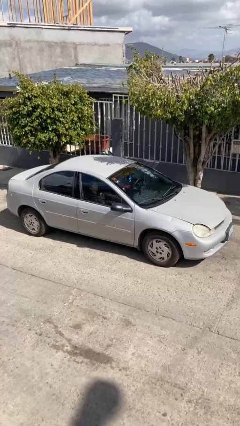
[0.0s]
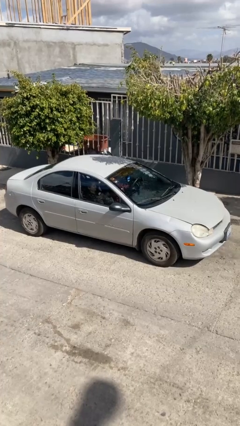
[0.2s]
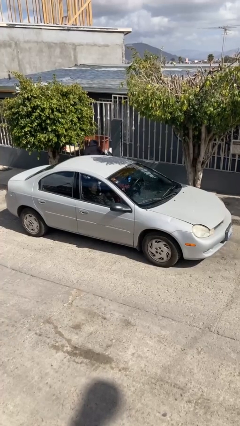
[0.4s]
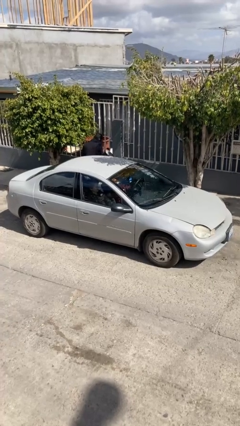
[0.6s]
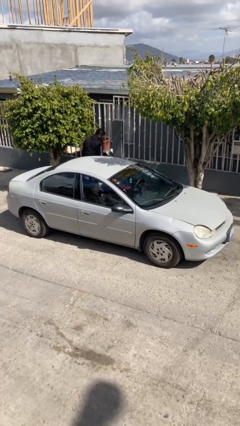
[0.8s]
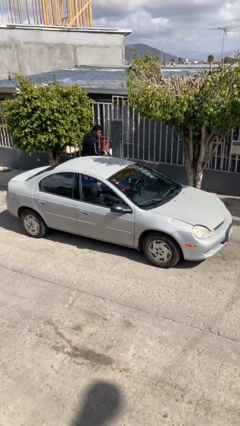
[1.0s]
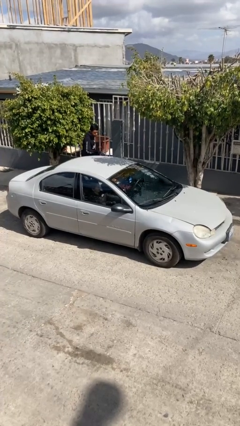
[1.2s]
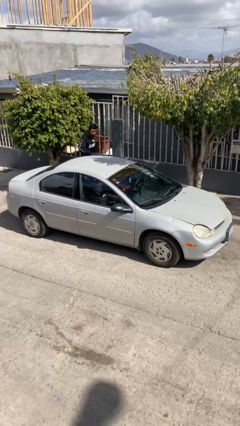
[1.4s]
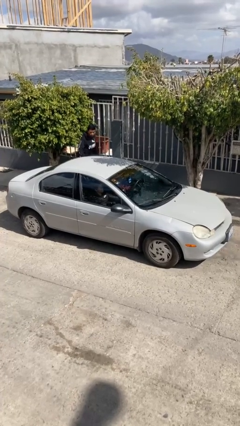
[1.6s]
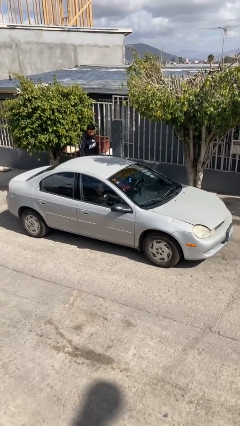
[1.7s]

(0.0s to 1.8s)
car drops off person

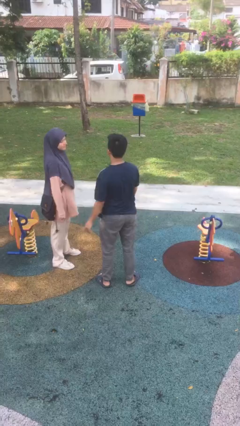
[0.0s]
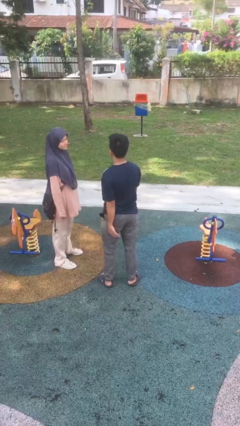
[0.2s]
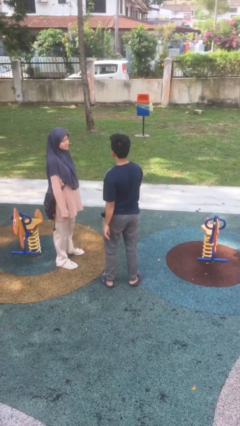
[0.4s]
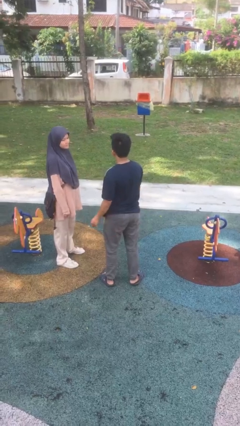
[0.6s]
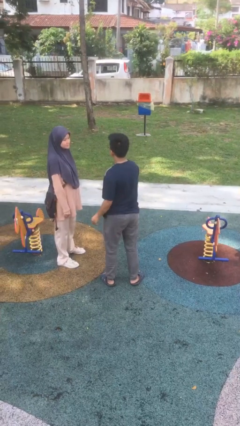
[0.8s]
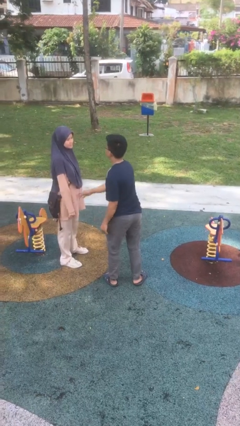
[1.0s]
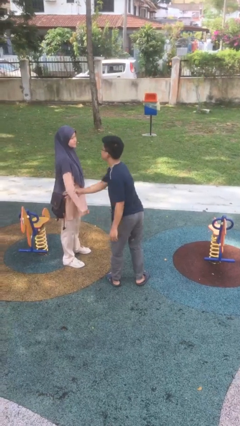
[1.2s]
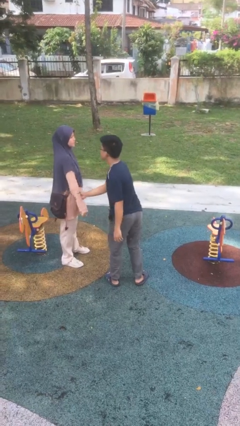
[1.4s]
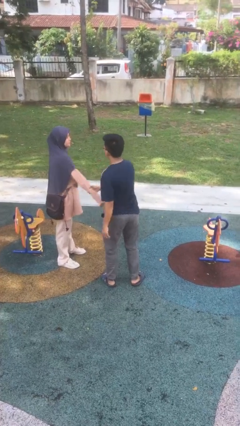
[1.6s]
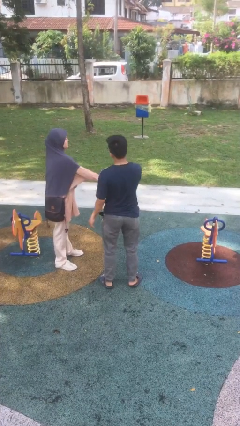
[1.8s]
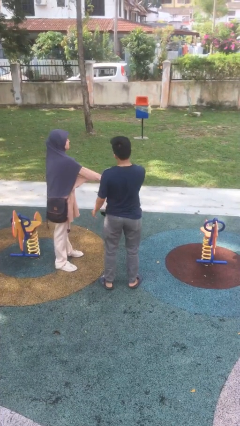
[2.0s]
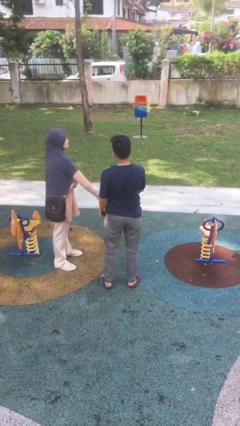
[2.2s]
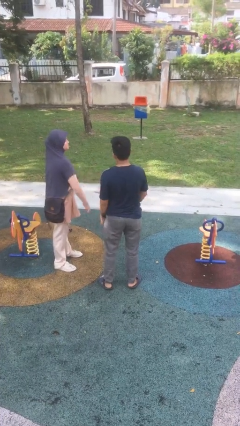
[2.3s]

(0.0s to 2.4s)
person grabs person by forearm

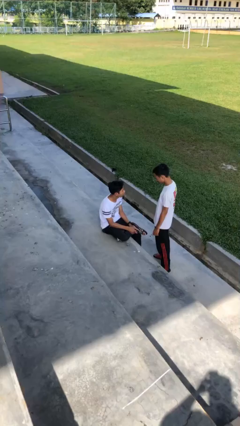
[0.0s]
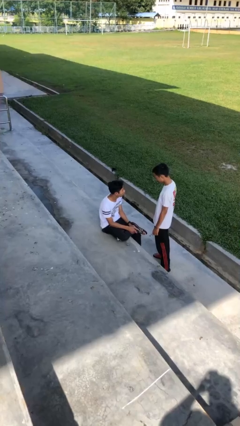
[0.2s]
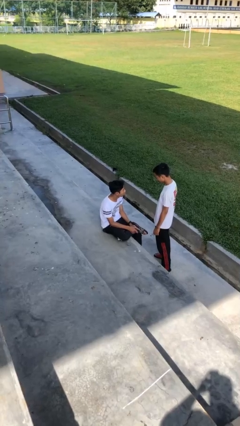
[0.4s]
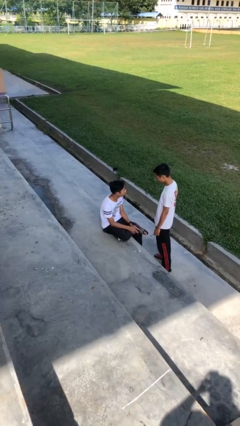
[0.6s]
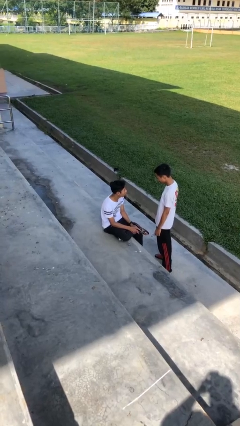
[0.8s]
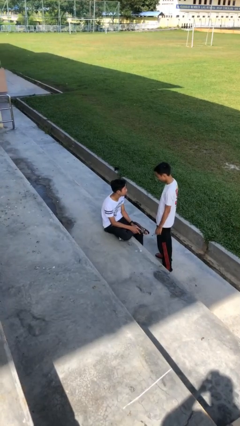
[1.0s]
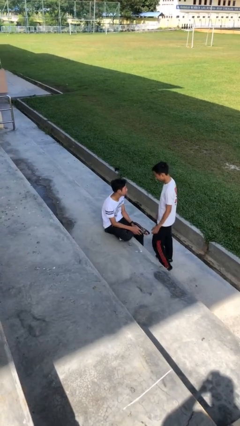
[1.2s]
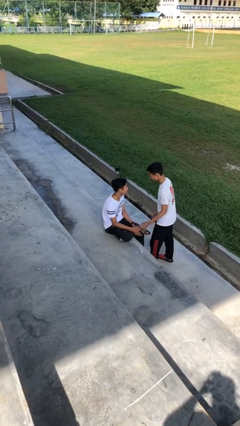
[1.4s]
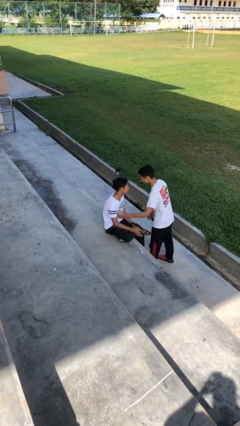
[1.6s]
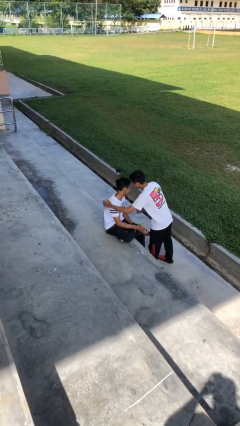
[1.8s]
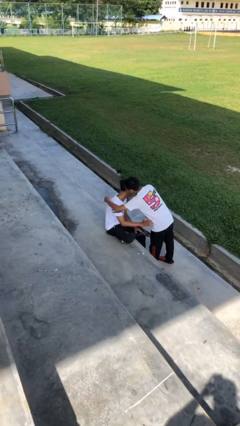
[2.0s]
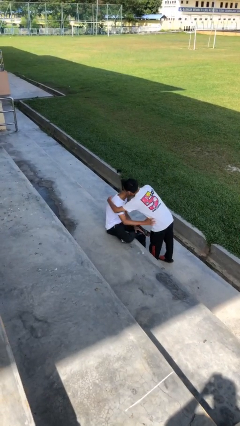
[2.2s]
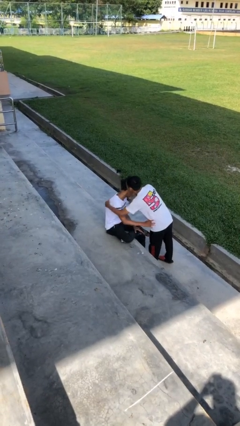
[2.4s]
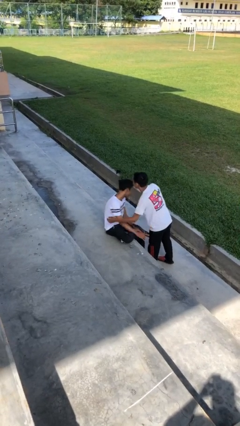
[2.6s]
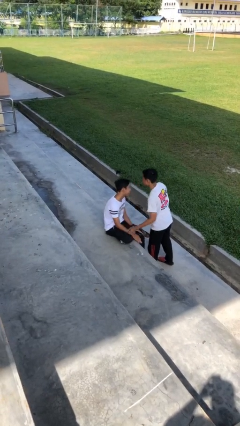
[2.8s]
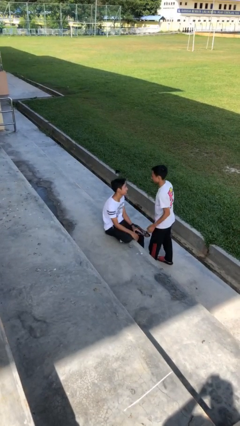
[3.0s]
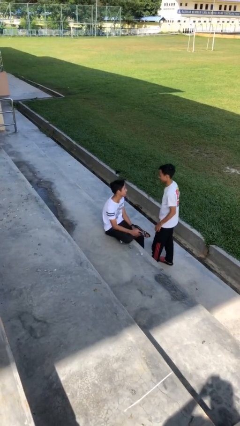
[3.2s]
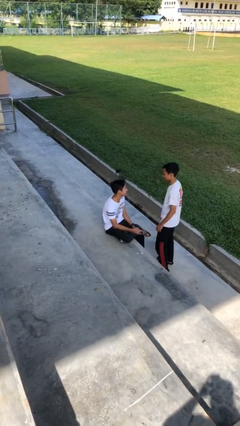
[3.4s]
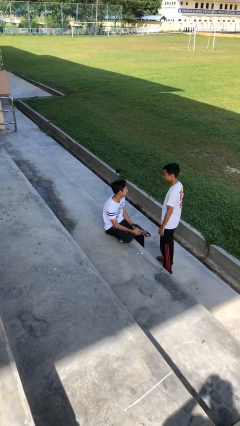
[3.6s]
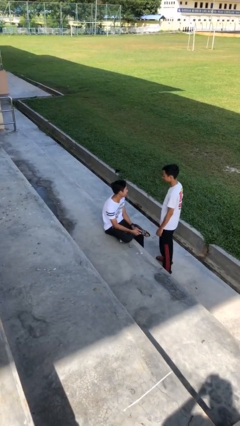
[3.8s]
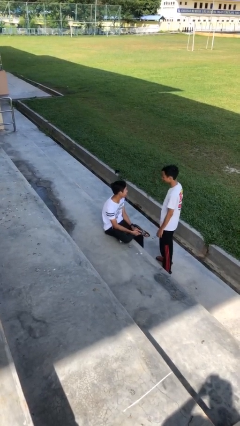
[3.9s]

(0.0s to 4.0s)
person embraces person

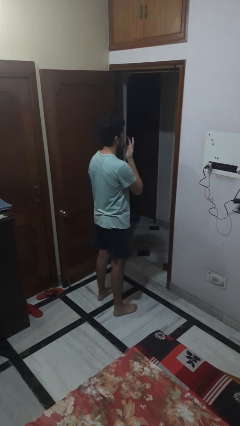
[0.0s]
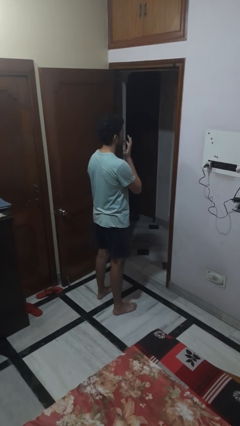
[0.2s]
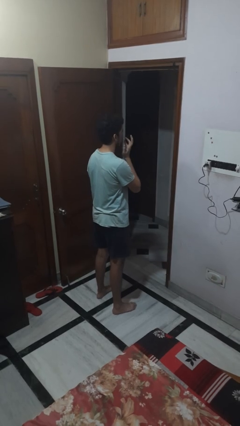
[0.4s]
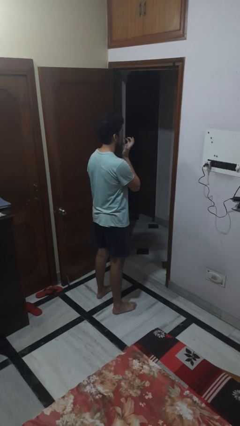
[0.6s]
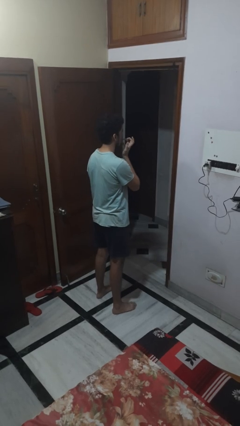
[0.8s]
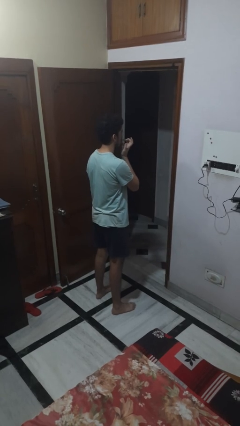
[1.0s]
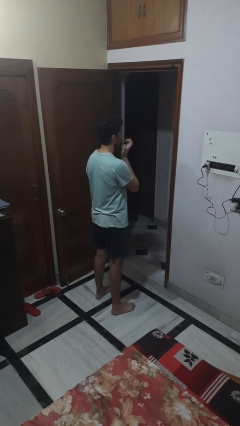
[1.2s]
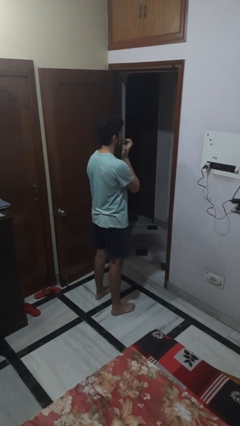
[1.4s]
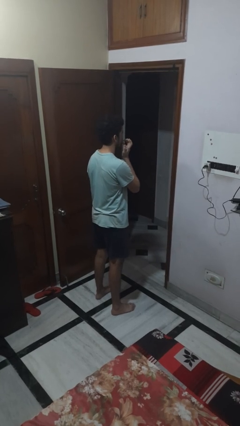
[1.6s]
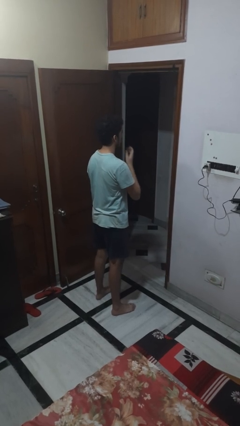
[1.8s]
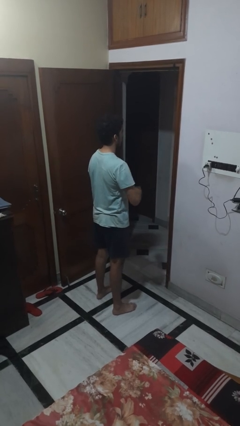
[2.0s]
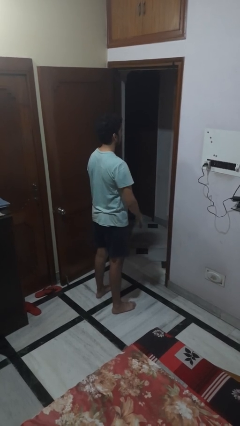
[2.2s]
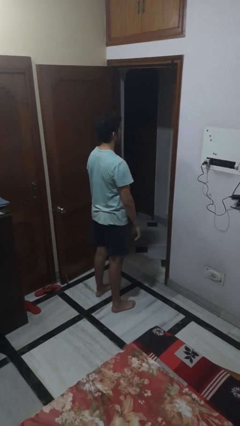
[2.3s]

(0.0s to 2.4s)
person licks fingers

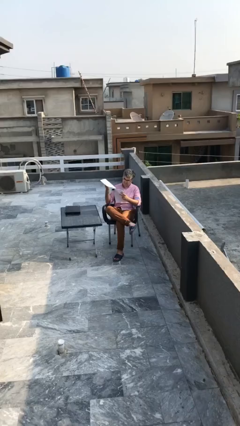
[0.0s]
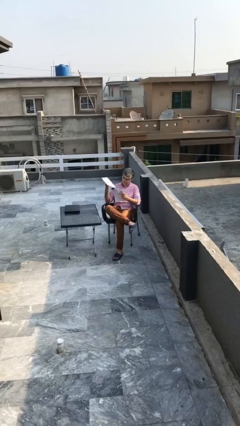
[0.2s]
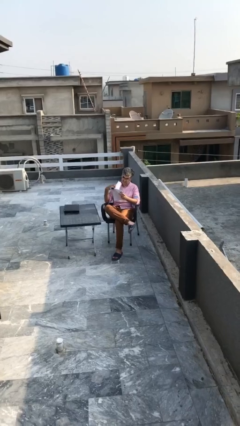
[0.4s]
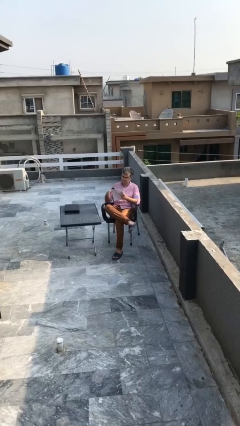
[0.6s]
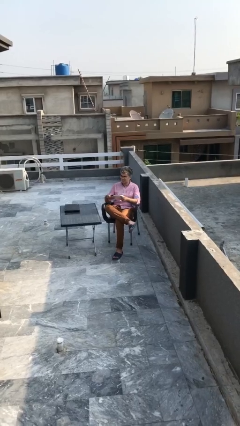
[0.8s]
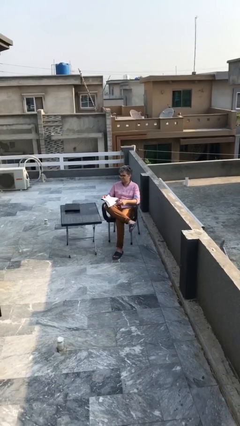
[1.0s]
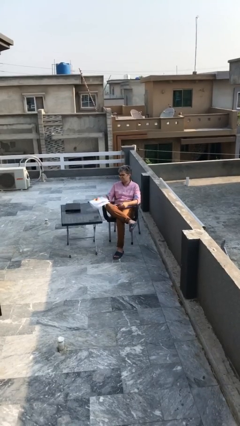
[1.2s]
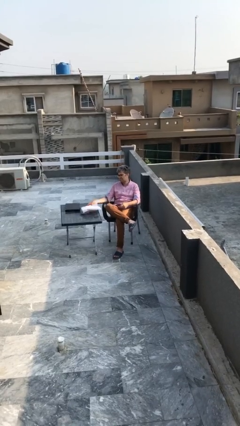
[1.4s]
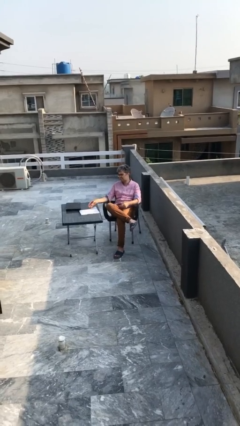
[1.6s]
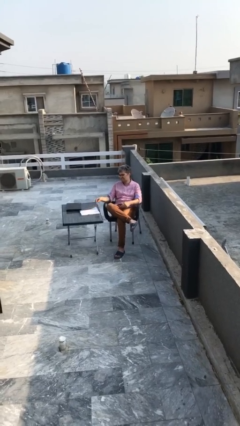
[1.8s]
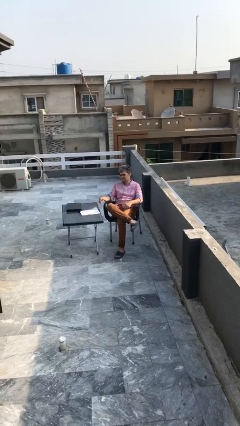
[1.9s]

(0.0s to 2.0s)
person puts down object on table

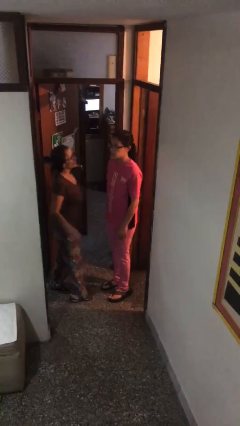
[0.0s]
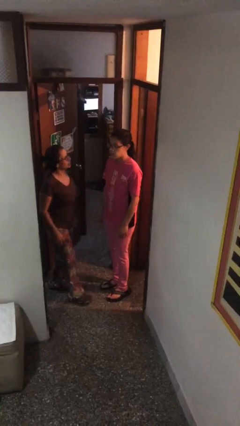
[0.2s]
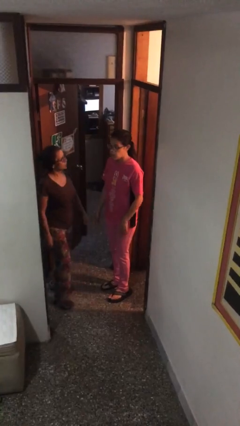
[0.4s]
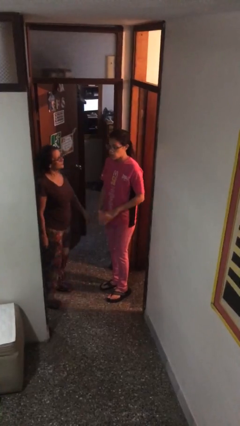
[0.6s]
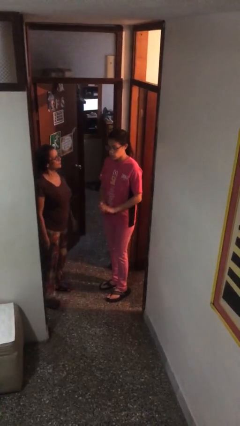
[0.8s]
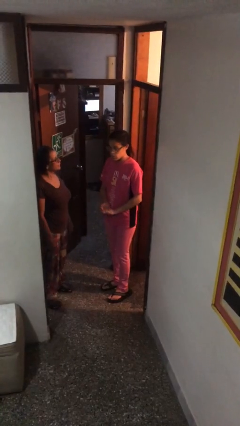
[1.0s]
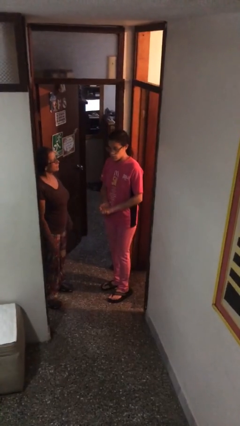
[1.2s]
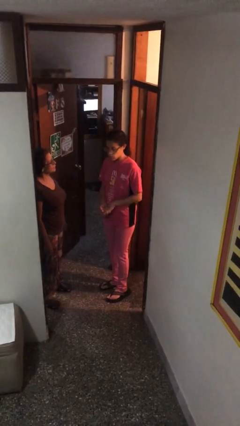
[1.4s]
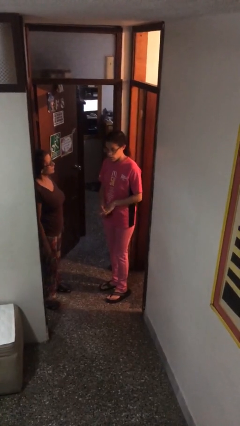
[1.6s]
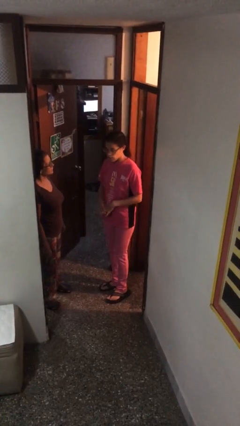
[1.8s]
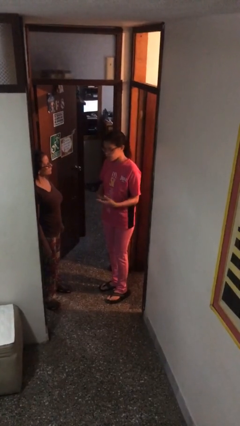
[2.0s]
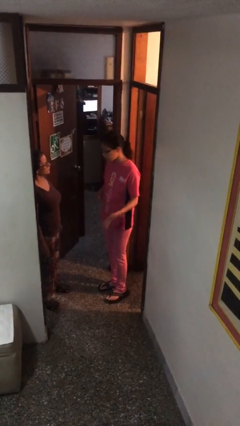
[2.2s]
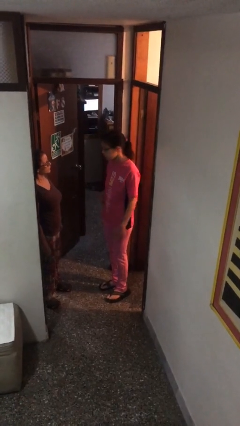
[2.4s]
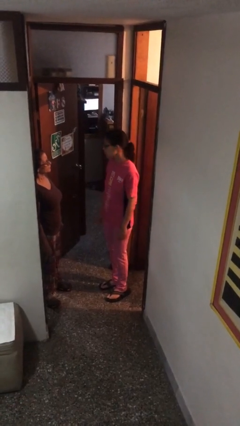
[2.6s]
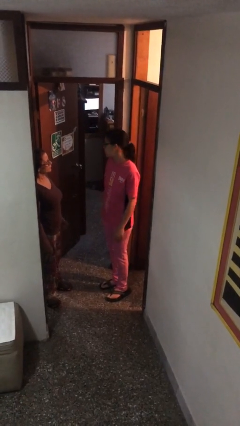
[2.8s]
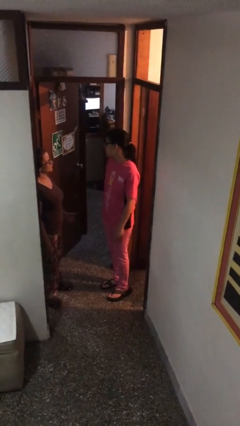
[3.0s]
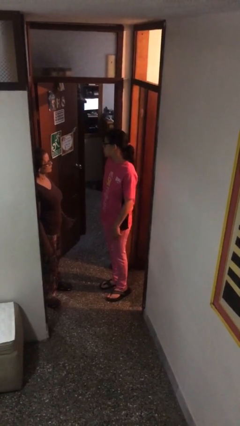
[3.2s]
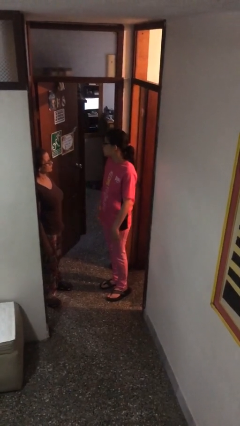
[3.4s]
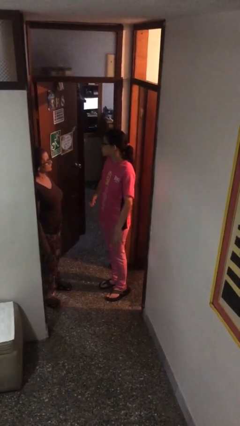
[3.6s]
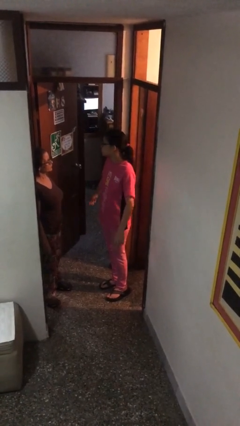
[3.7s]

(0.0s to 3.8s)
person talks to person

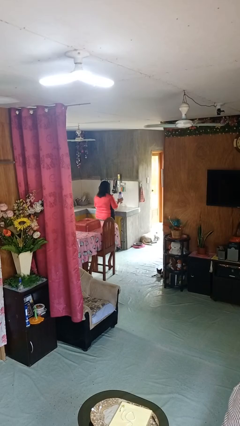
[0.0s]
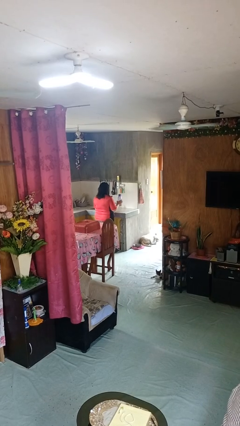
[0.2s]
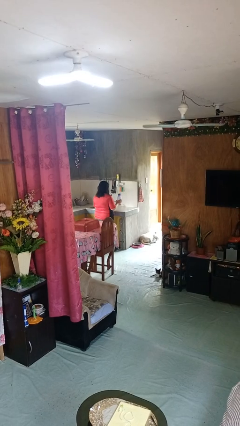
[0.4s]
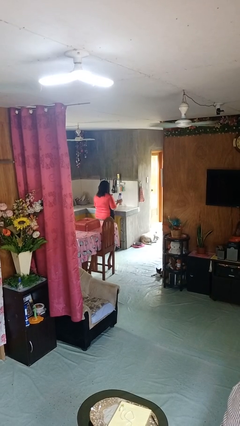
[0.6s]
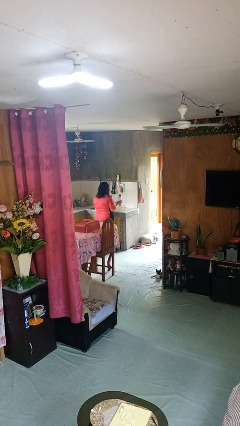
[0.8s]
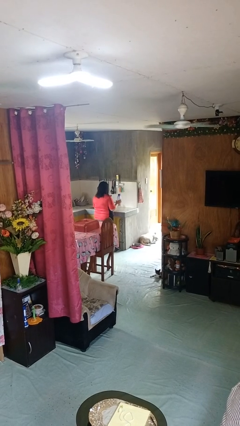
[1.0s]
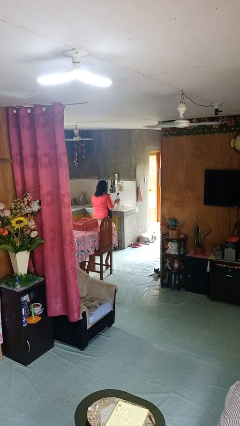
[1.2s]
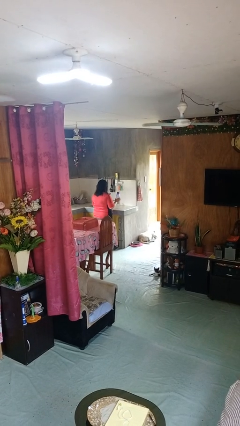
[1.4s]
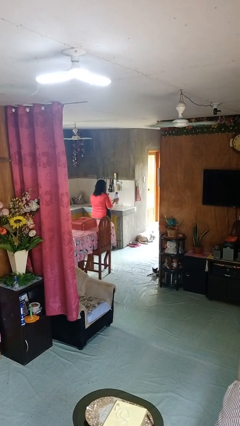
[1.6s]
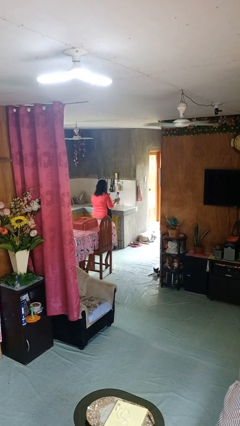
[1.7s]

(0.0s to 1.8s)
person picks up object from countertop
